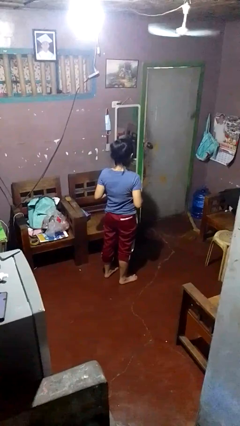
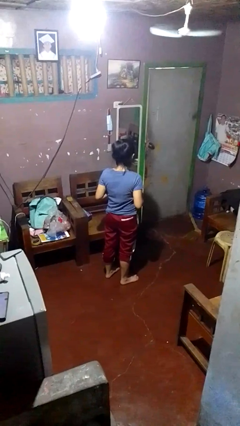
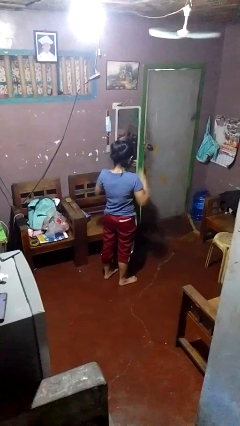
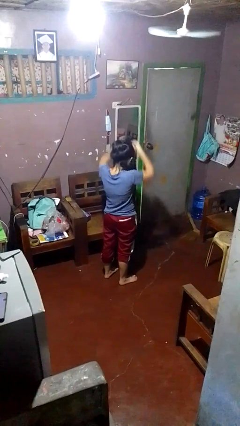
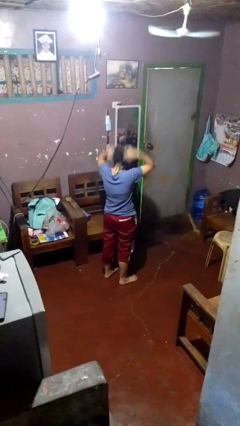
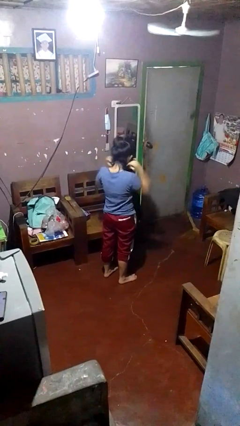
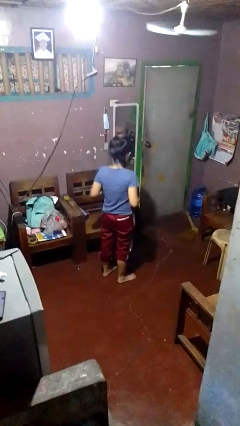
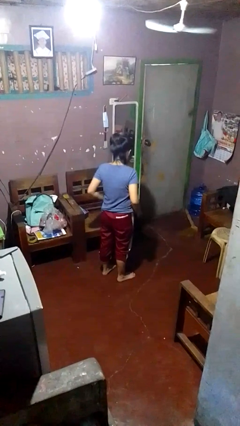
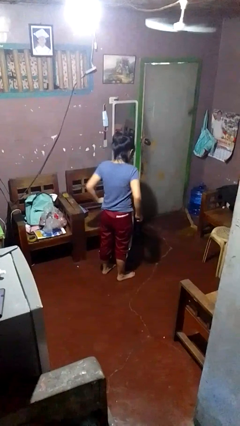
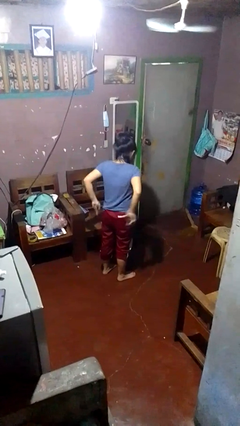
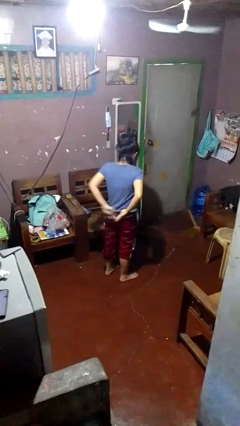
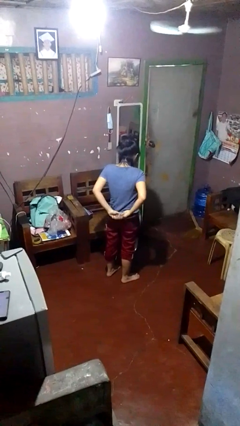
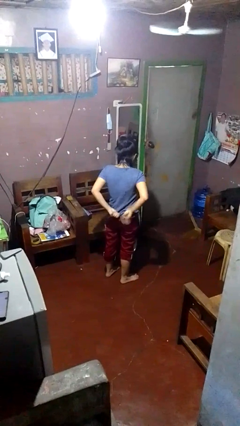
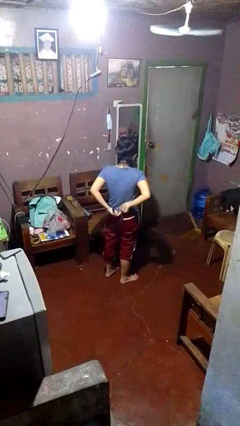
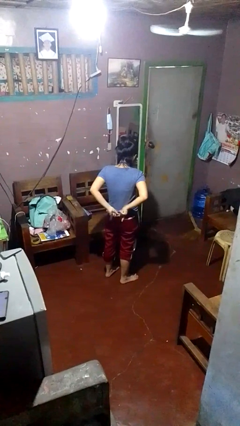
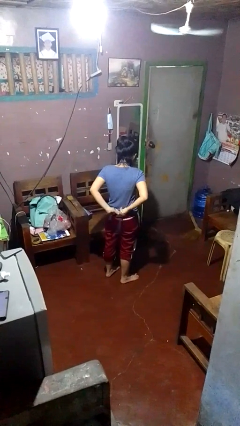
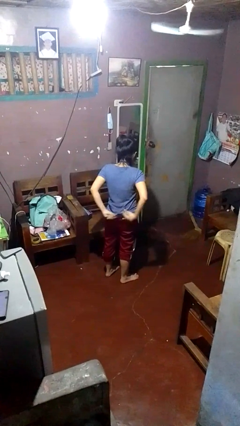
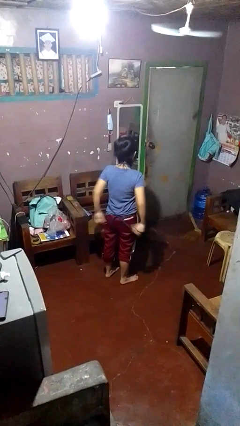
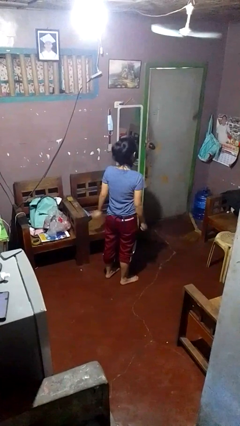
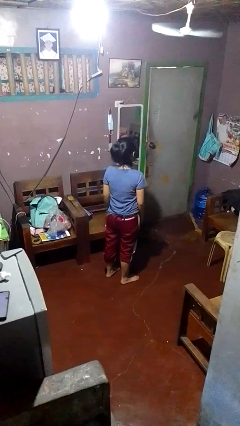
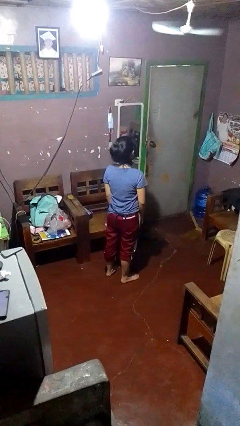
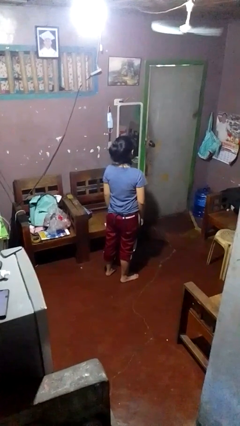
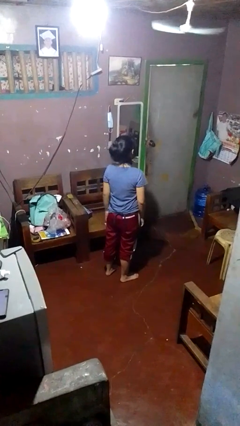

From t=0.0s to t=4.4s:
person puts on apron

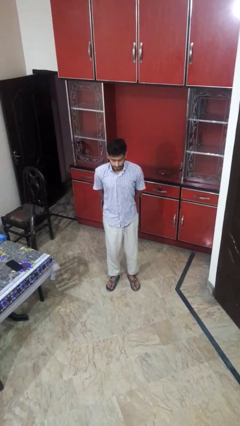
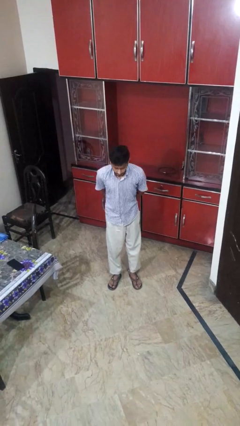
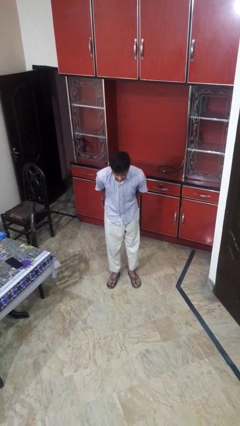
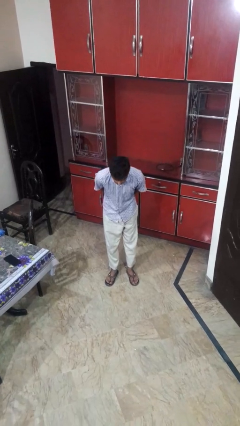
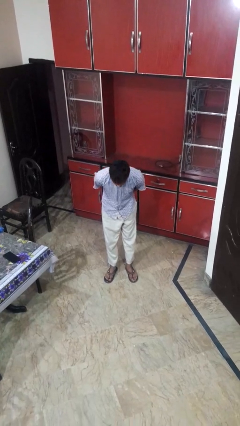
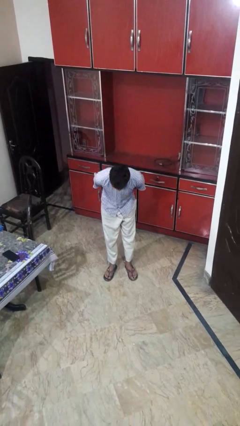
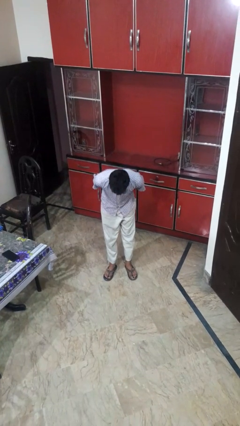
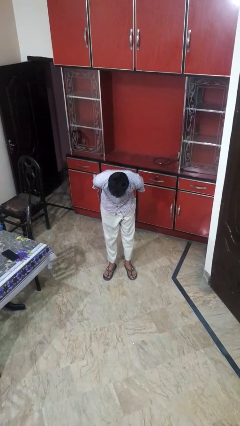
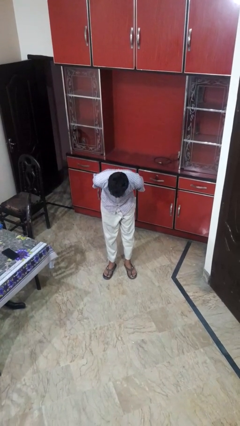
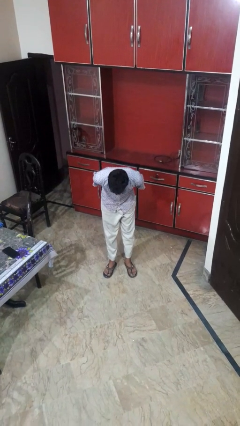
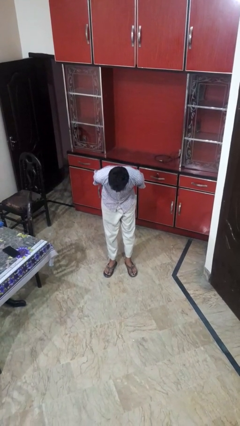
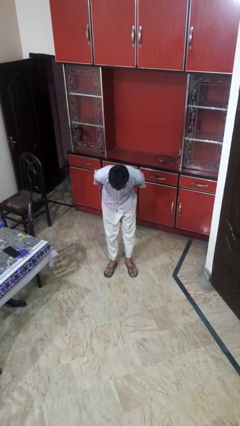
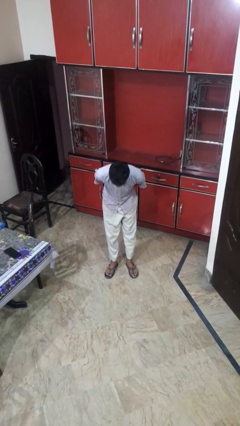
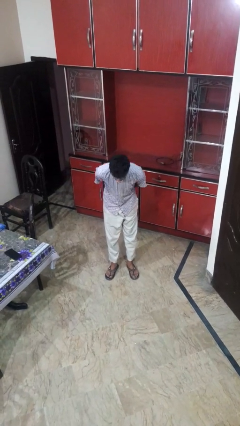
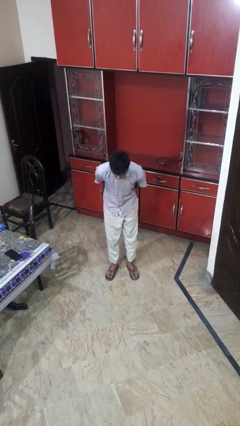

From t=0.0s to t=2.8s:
person bows

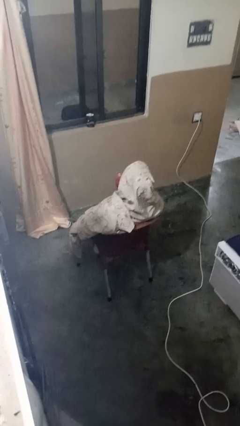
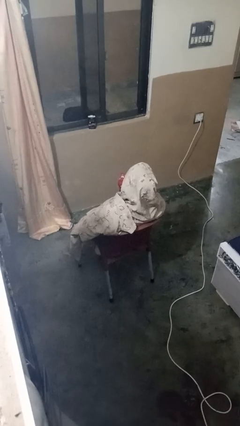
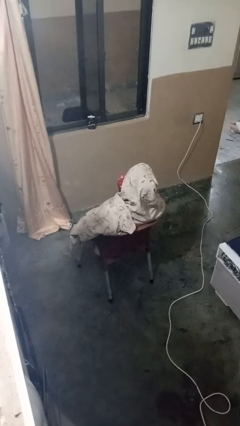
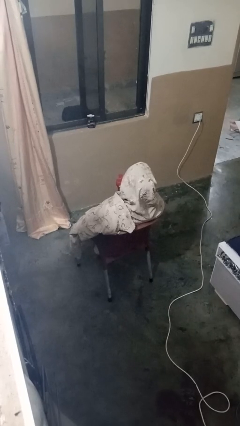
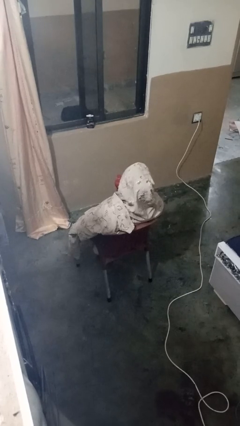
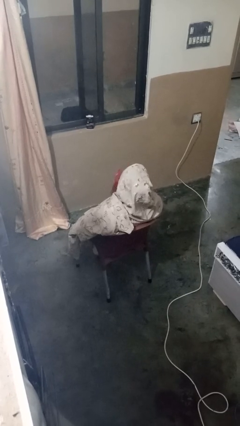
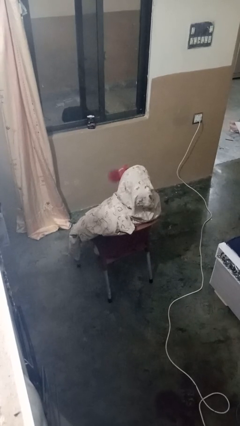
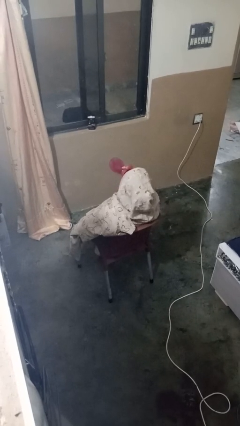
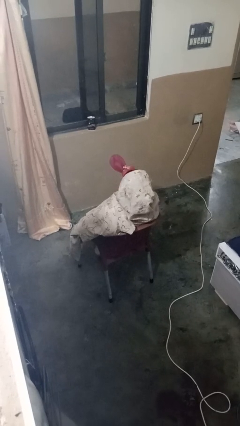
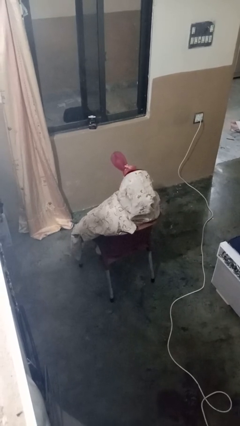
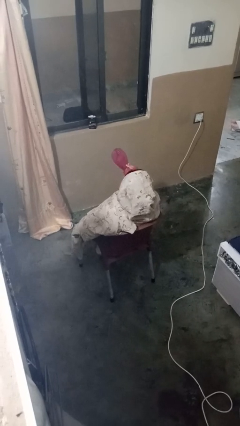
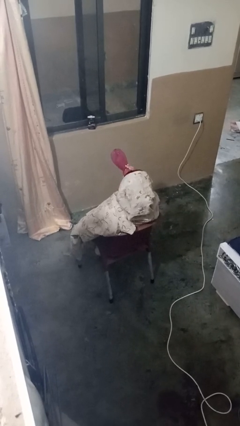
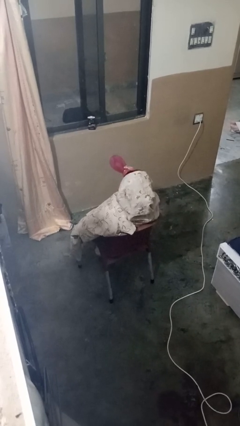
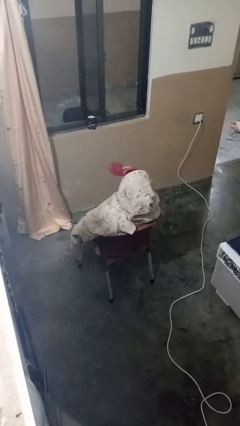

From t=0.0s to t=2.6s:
person drinks from bottle

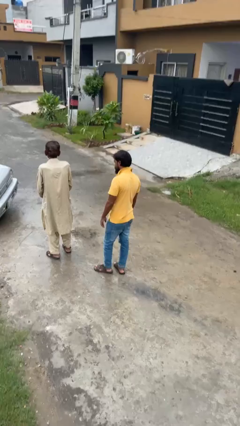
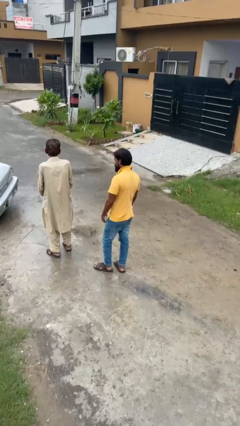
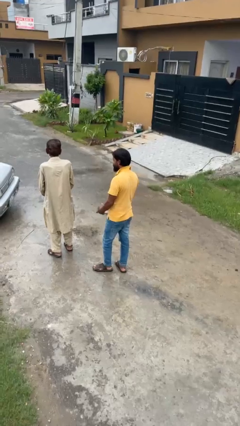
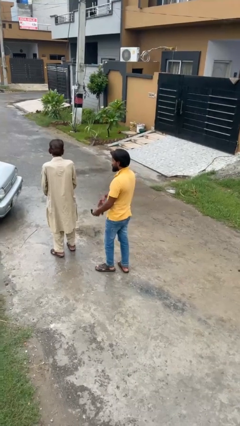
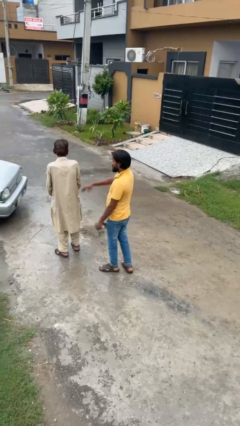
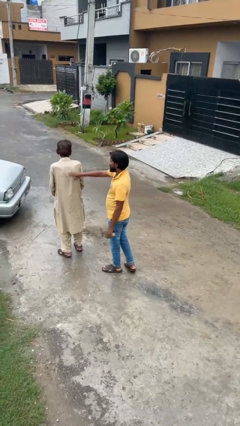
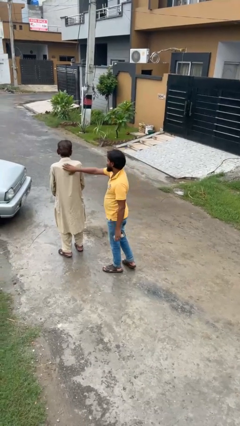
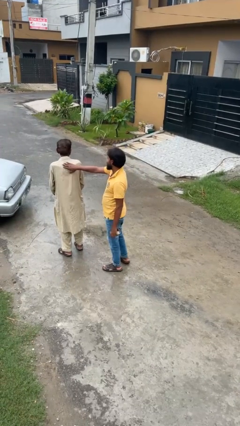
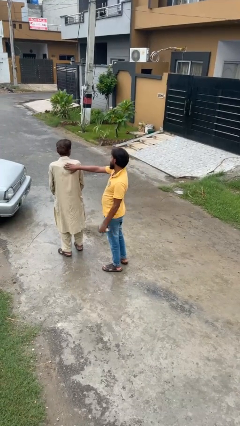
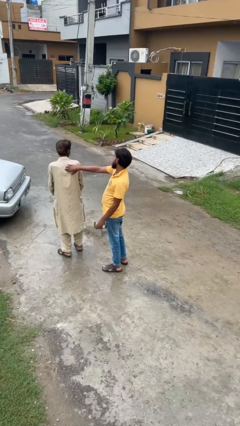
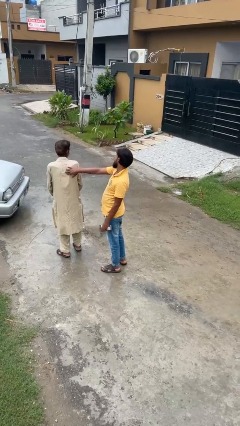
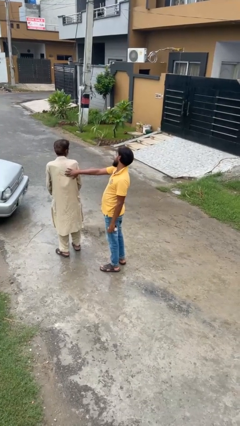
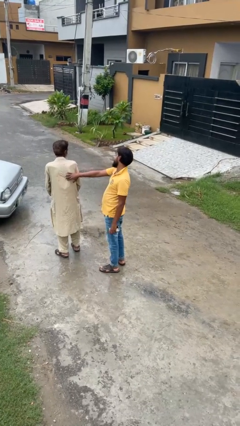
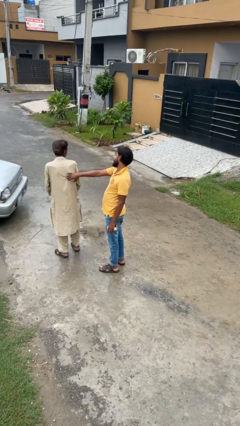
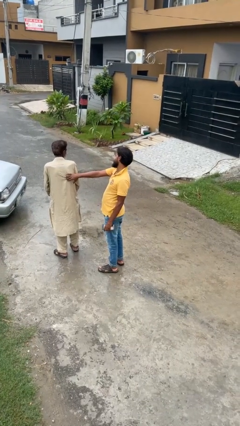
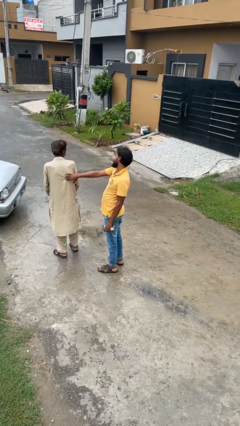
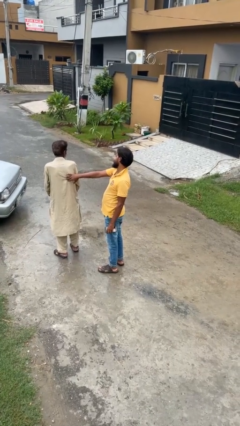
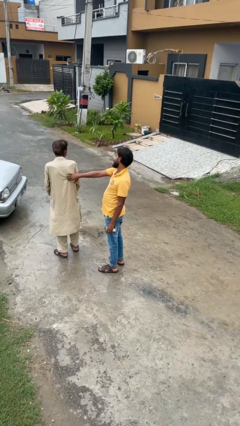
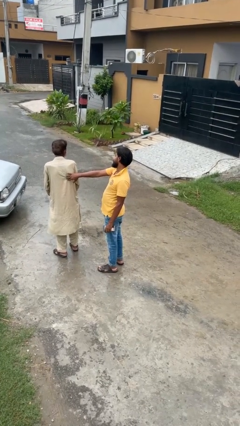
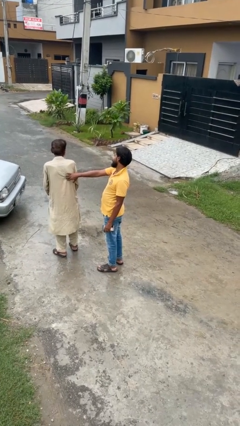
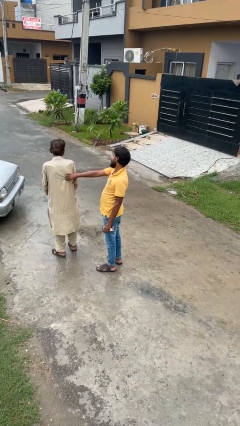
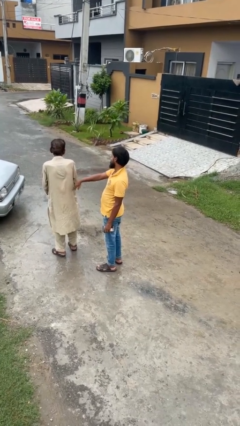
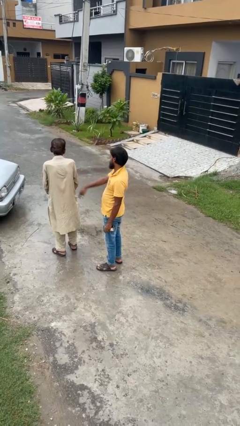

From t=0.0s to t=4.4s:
person touches back of person

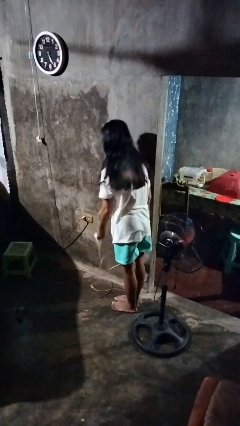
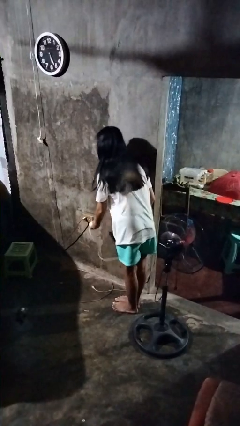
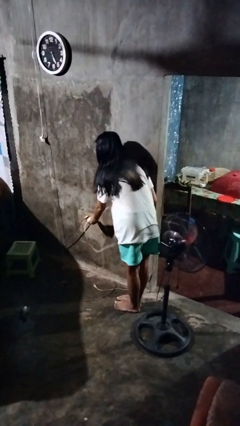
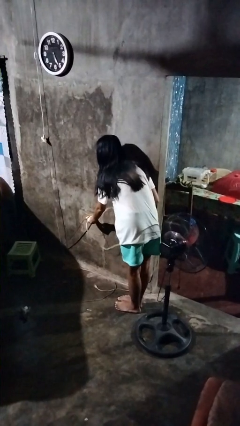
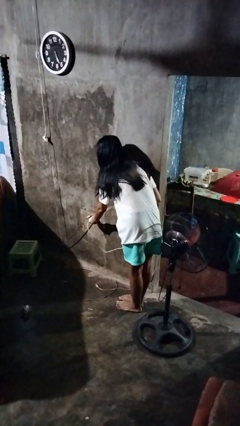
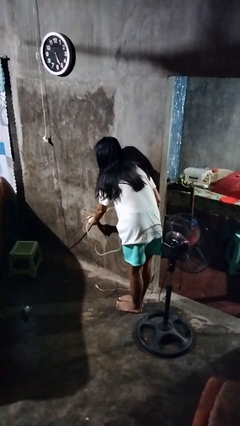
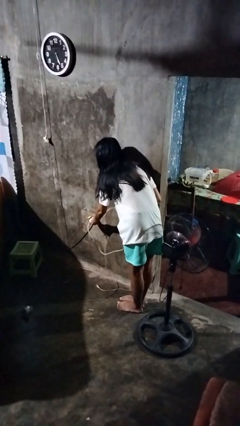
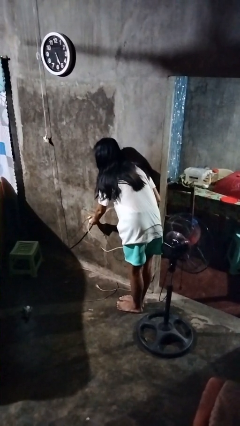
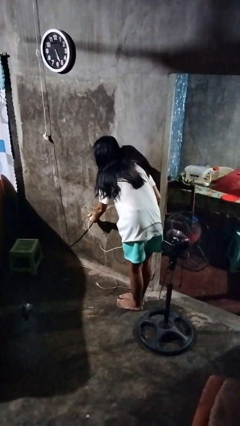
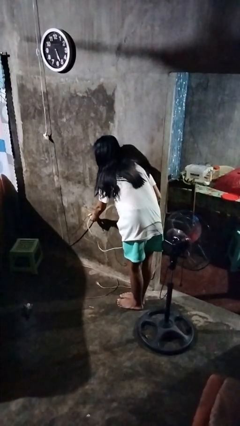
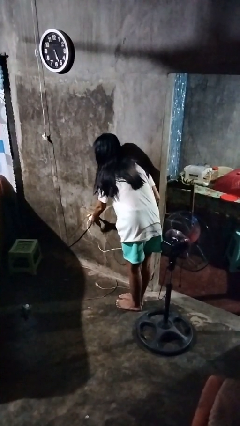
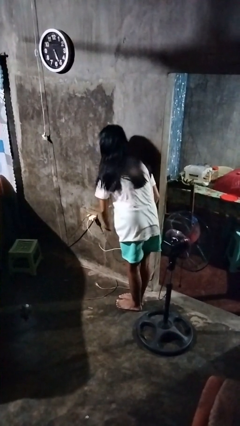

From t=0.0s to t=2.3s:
person plugs into electrical socket

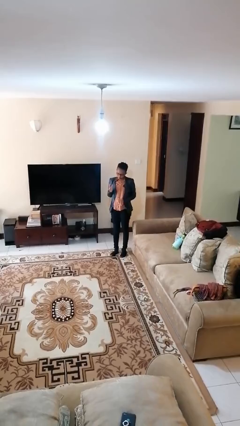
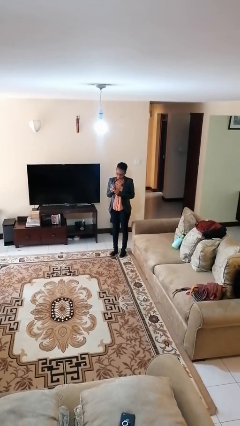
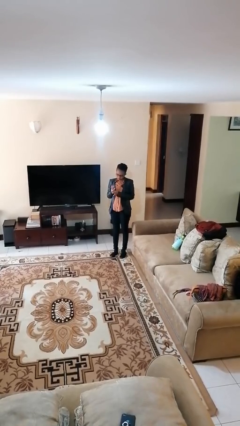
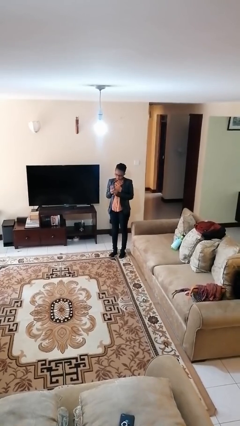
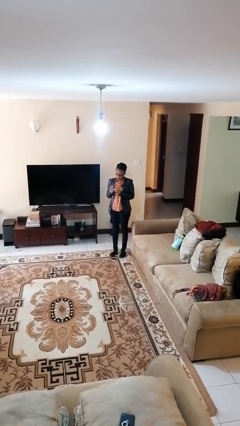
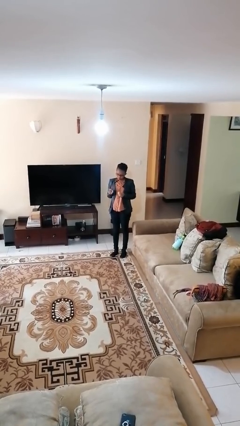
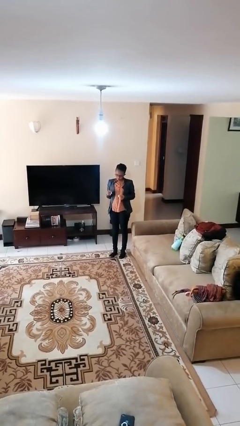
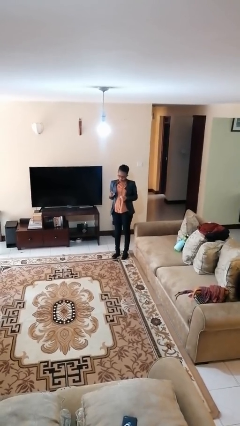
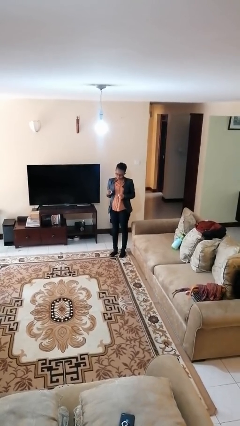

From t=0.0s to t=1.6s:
person takes off ring
